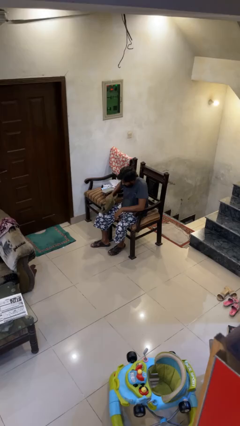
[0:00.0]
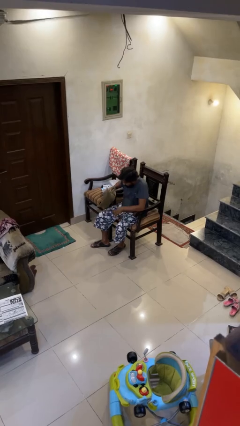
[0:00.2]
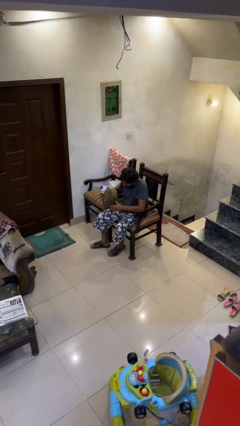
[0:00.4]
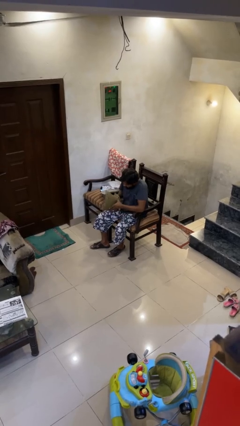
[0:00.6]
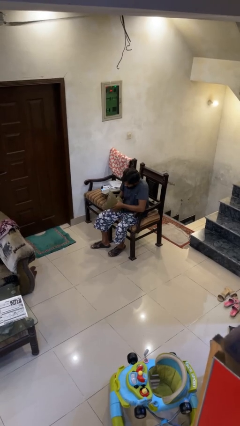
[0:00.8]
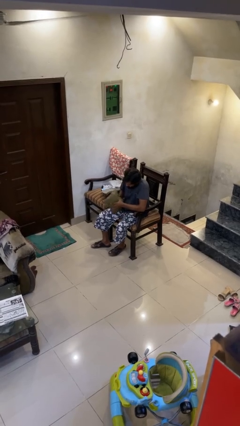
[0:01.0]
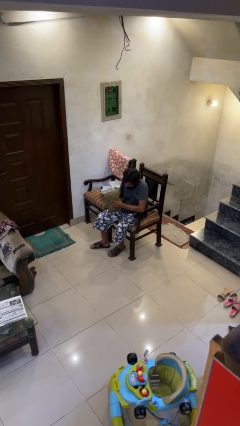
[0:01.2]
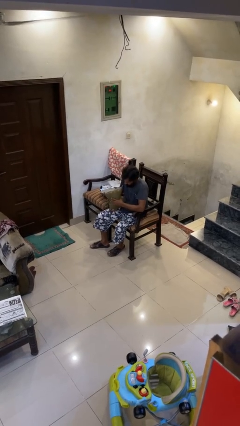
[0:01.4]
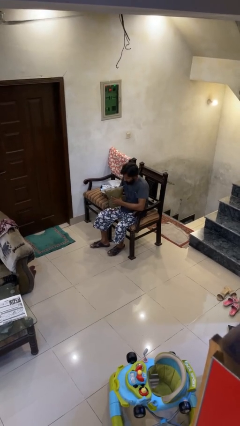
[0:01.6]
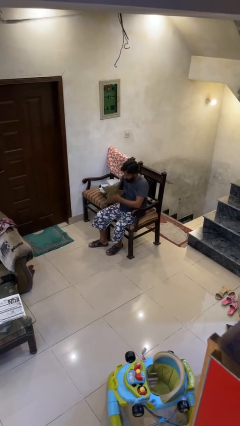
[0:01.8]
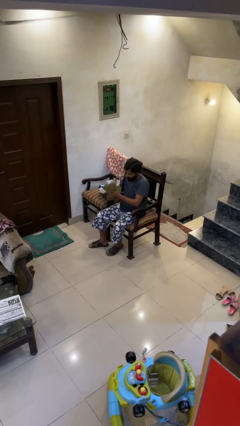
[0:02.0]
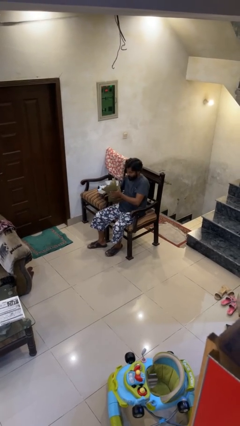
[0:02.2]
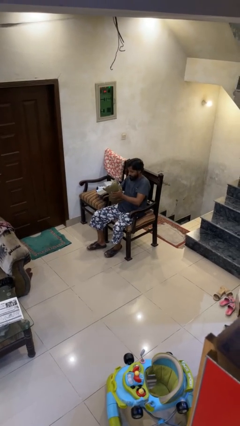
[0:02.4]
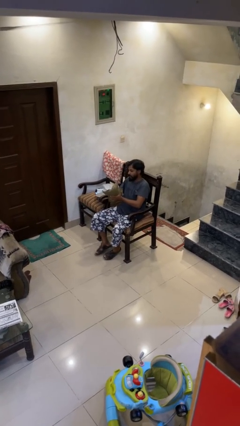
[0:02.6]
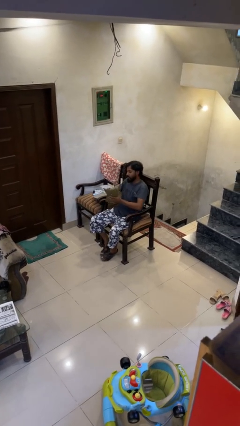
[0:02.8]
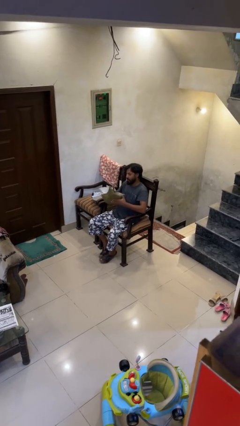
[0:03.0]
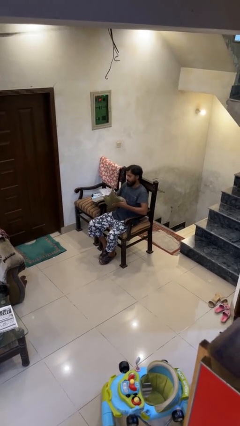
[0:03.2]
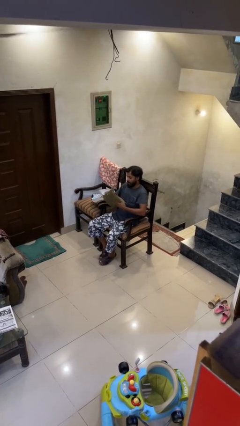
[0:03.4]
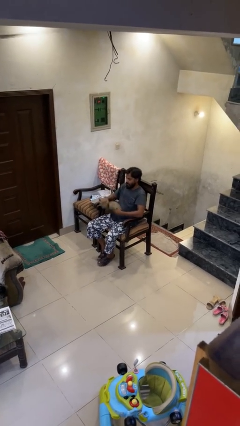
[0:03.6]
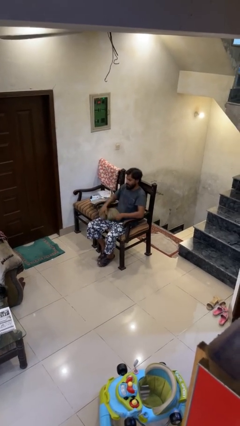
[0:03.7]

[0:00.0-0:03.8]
person squeezes object

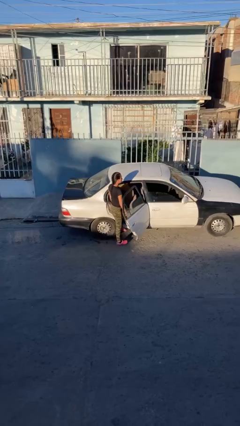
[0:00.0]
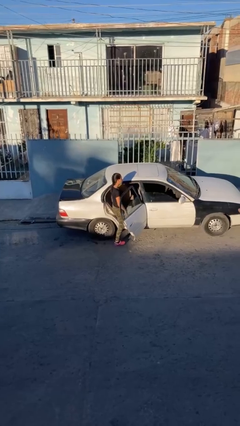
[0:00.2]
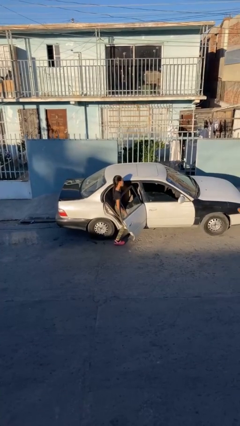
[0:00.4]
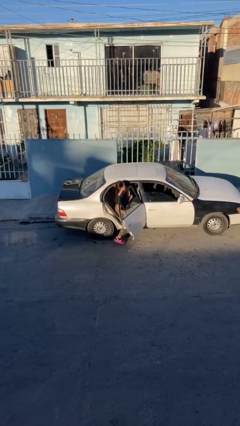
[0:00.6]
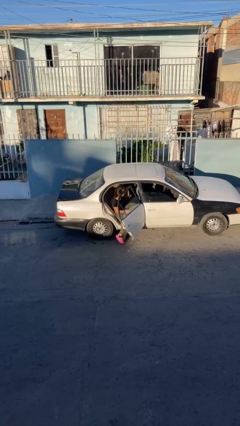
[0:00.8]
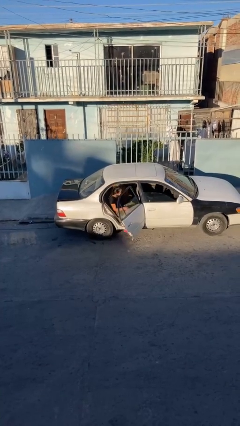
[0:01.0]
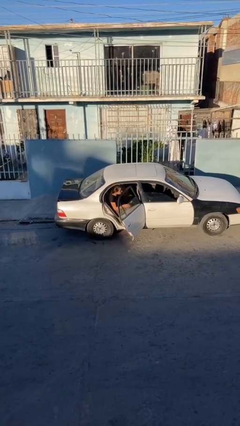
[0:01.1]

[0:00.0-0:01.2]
person enters car

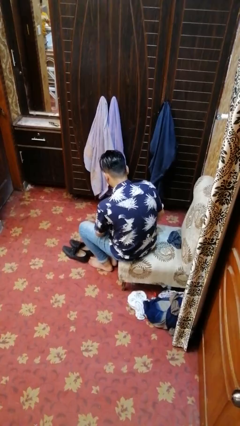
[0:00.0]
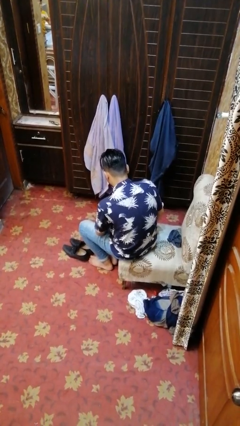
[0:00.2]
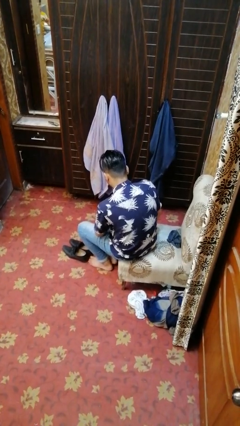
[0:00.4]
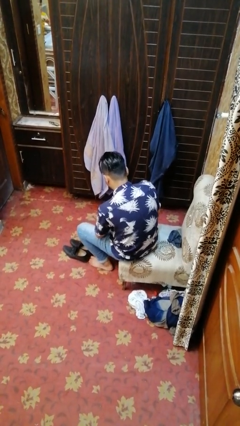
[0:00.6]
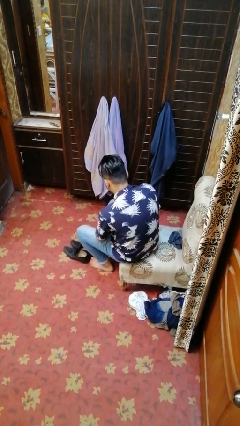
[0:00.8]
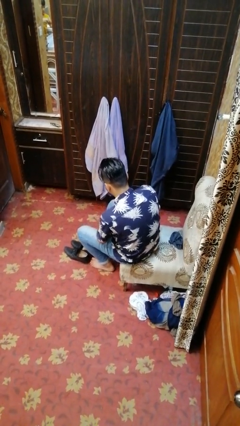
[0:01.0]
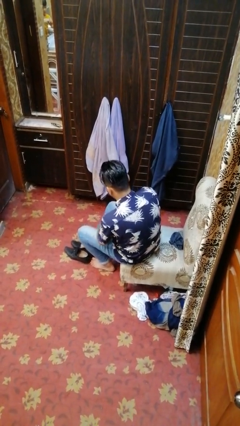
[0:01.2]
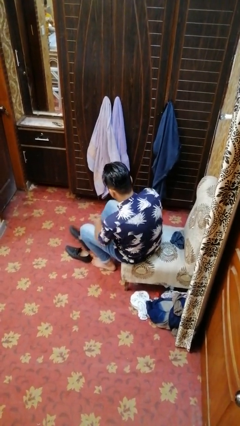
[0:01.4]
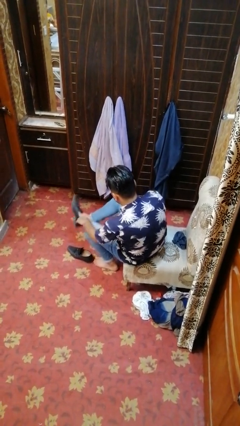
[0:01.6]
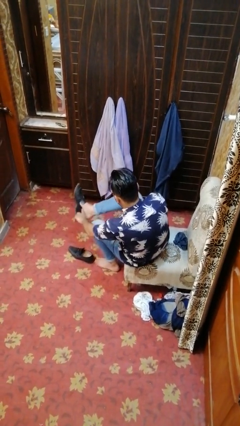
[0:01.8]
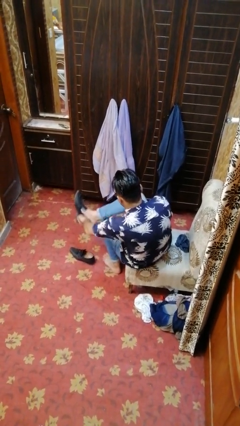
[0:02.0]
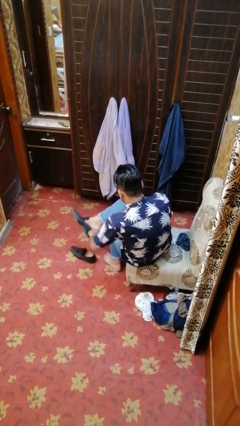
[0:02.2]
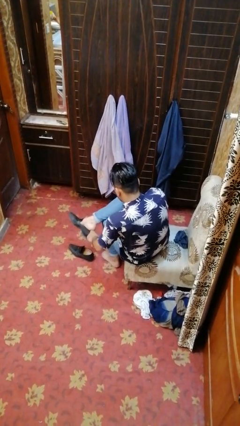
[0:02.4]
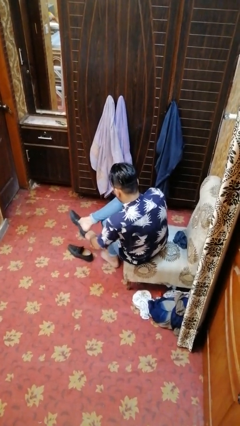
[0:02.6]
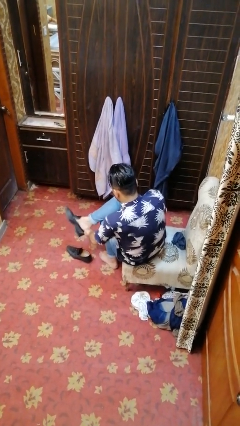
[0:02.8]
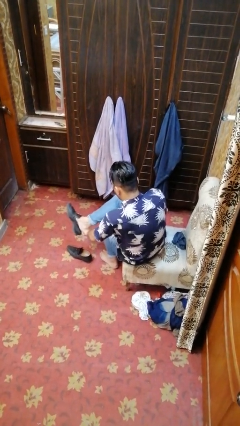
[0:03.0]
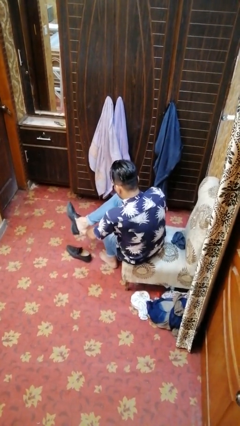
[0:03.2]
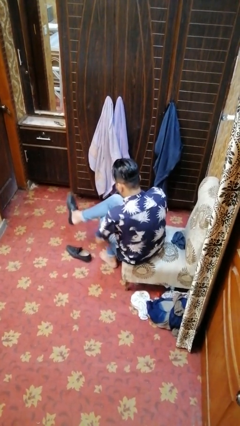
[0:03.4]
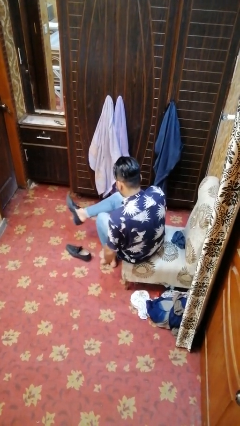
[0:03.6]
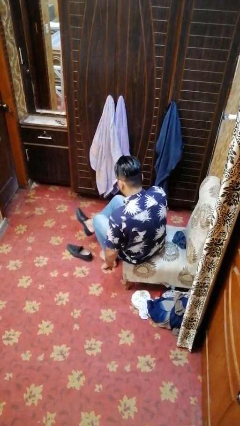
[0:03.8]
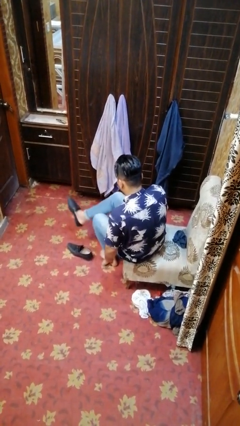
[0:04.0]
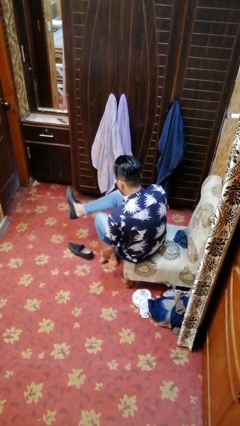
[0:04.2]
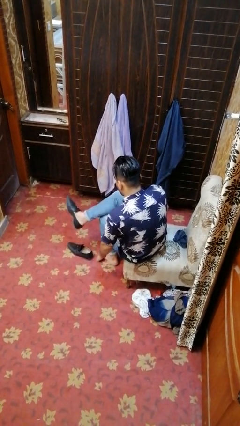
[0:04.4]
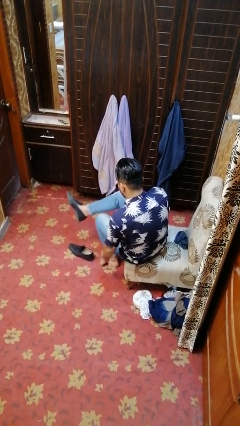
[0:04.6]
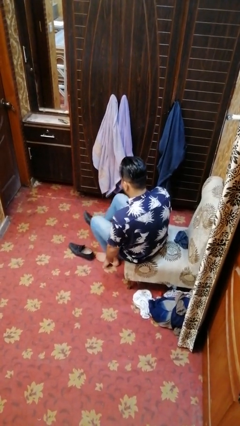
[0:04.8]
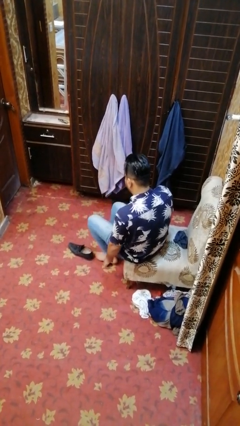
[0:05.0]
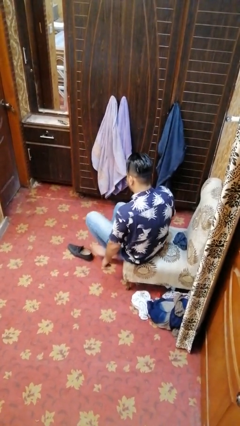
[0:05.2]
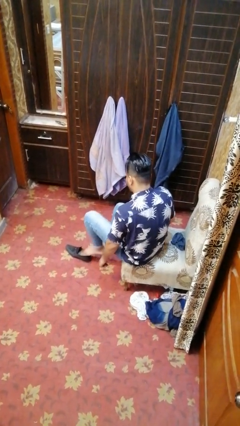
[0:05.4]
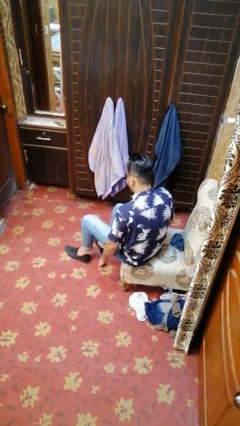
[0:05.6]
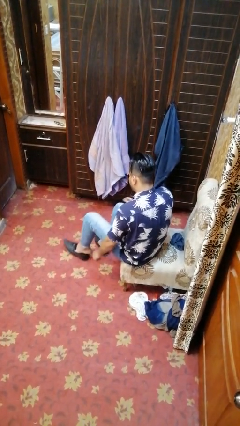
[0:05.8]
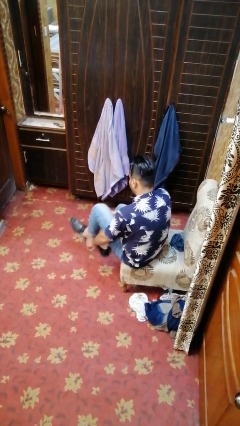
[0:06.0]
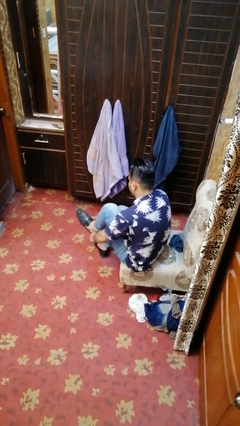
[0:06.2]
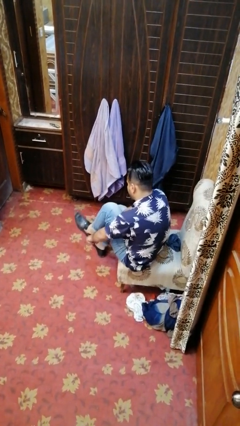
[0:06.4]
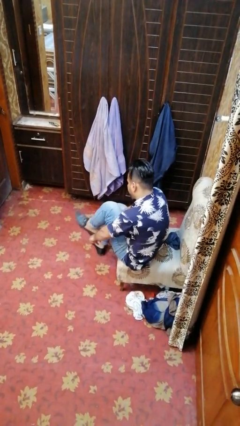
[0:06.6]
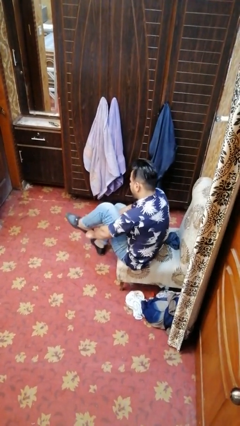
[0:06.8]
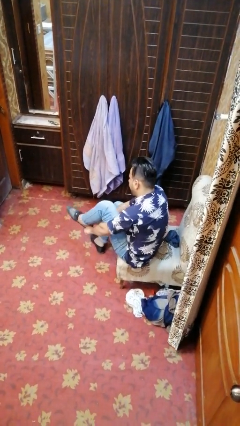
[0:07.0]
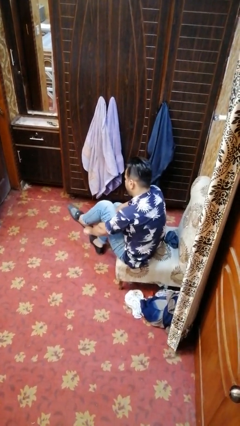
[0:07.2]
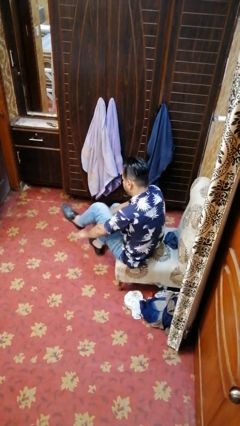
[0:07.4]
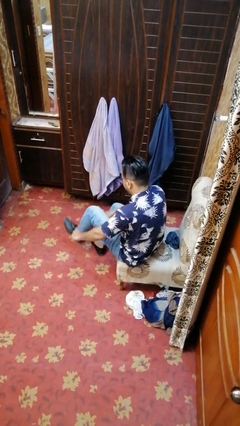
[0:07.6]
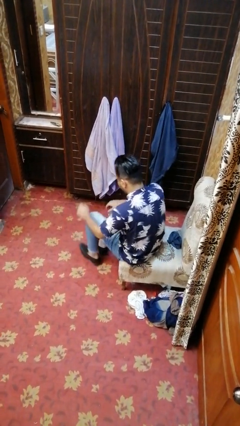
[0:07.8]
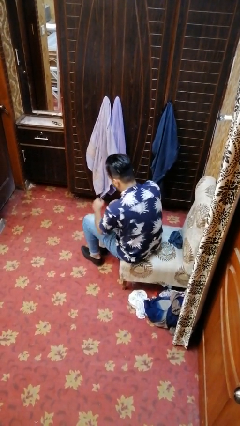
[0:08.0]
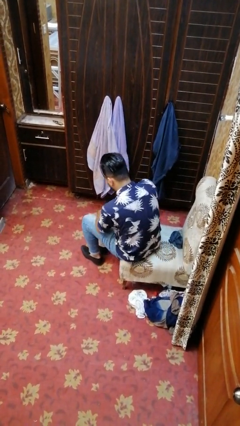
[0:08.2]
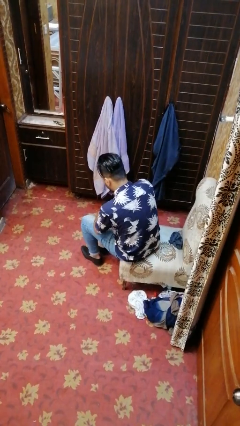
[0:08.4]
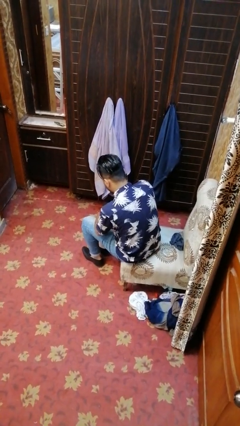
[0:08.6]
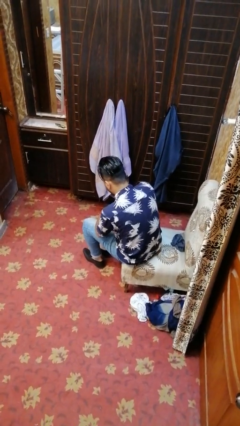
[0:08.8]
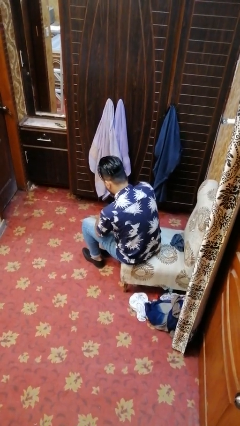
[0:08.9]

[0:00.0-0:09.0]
person puts on shoes

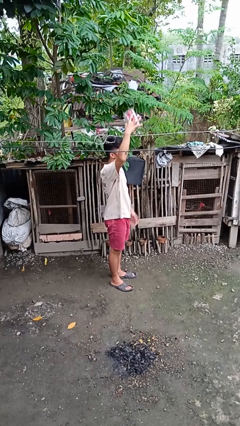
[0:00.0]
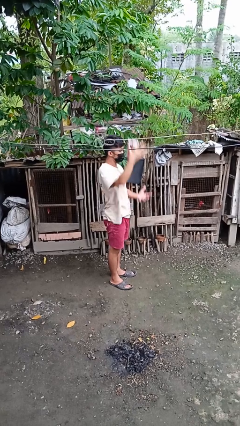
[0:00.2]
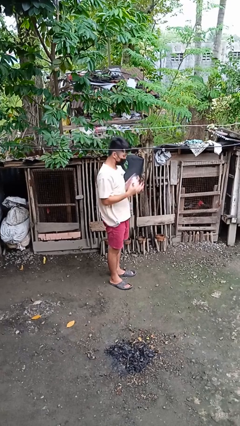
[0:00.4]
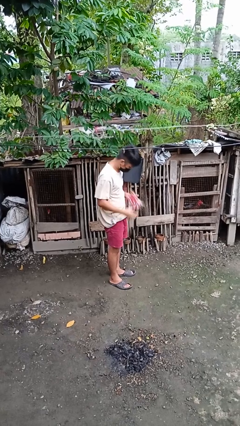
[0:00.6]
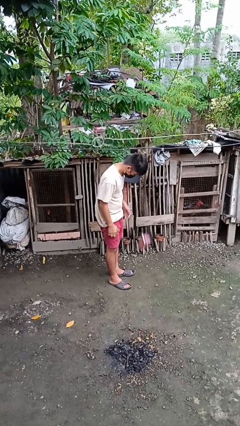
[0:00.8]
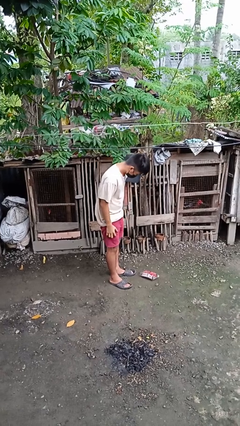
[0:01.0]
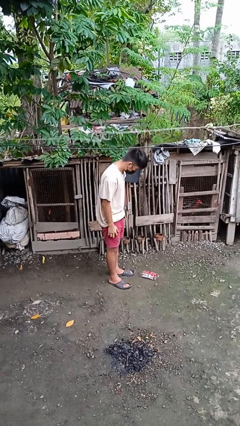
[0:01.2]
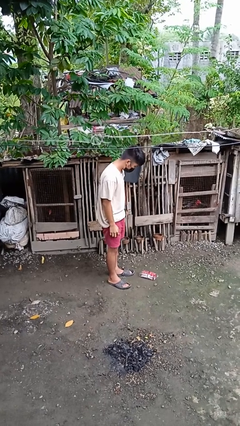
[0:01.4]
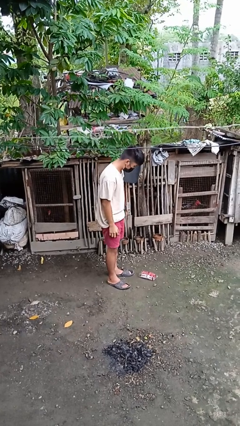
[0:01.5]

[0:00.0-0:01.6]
person drops object

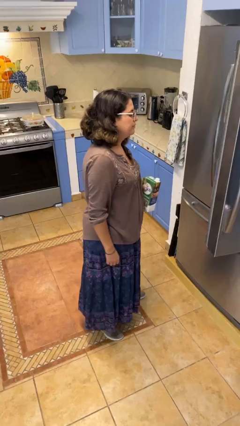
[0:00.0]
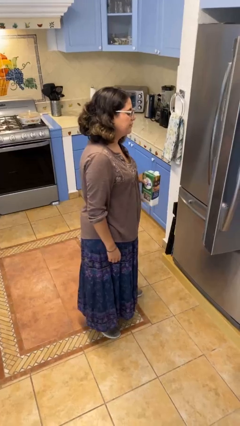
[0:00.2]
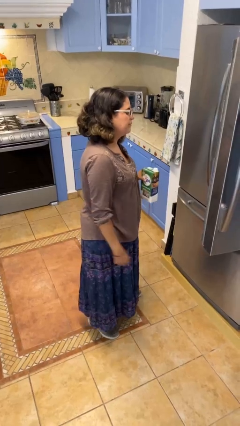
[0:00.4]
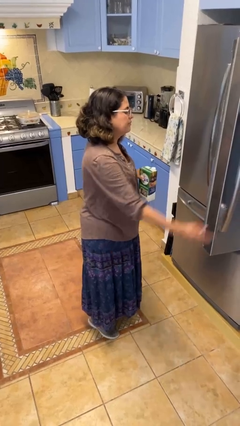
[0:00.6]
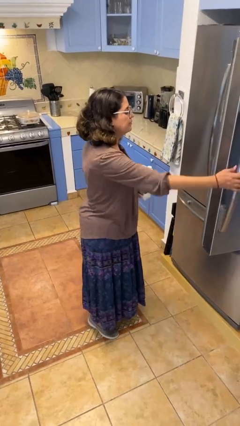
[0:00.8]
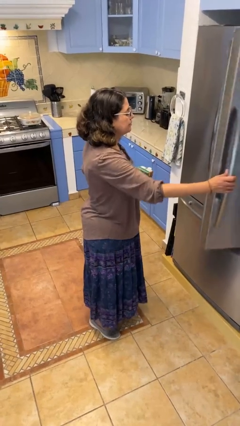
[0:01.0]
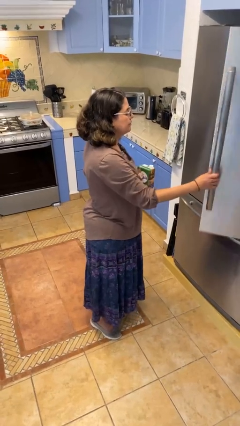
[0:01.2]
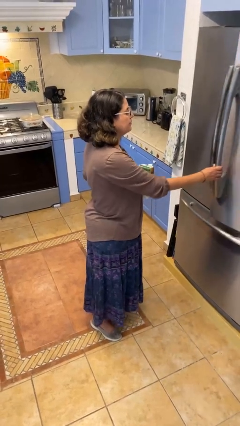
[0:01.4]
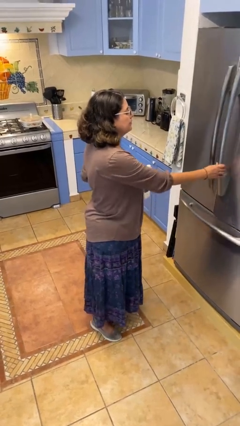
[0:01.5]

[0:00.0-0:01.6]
person closes refrigerator

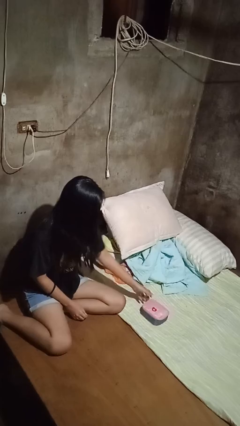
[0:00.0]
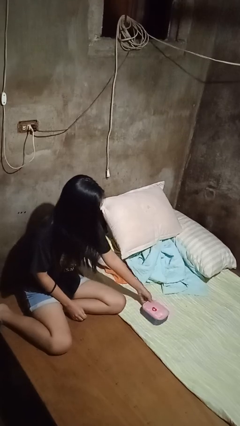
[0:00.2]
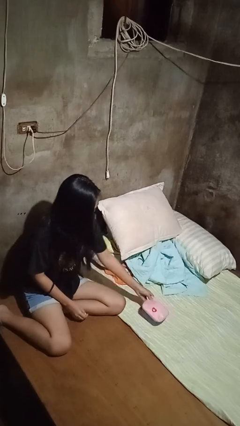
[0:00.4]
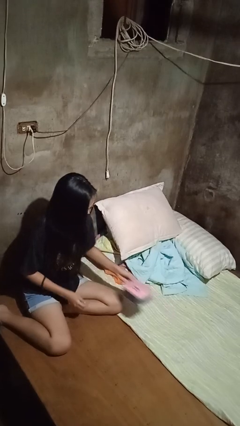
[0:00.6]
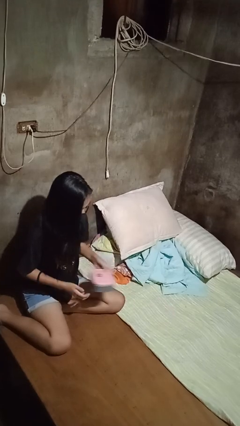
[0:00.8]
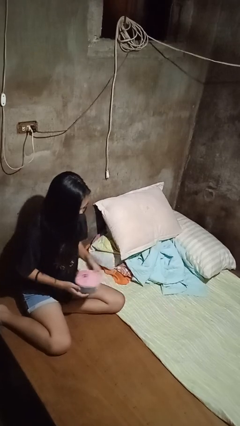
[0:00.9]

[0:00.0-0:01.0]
person picks up object from bed
